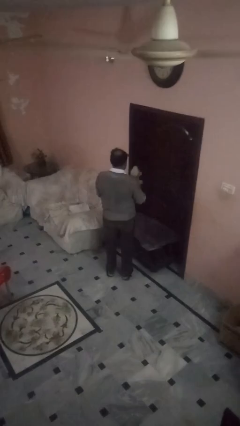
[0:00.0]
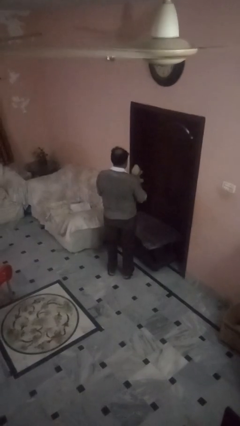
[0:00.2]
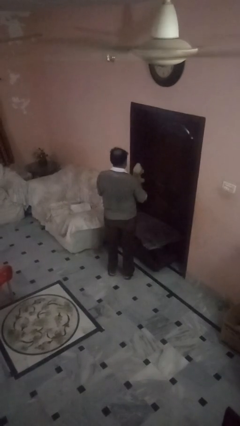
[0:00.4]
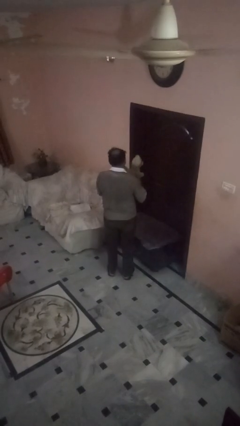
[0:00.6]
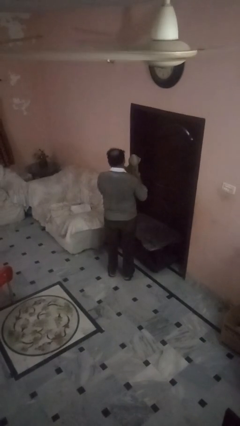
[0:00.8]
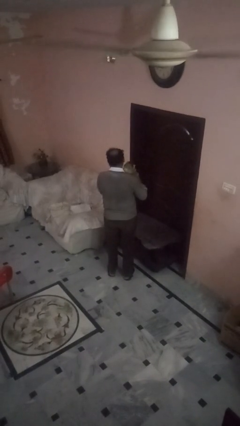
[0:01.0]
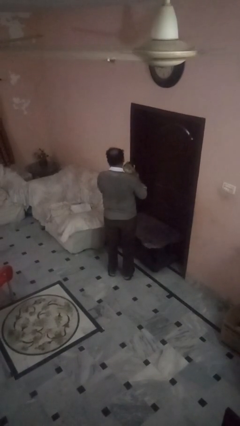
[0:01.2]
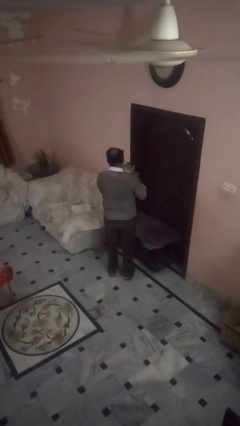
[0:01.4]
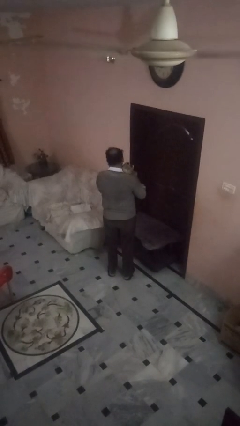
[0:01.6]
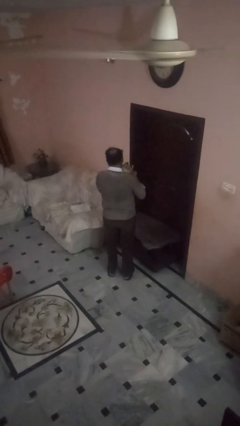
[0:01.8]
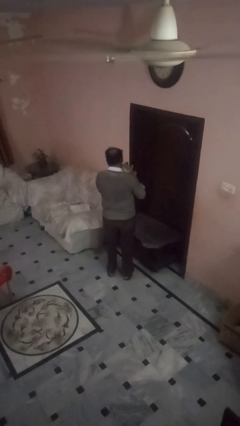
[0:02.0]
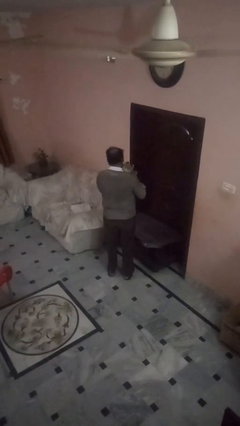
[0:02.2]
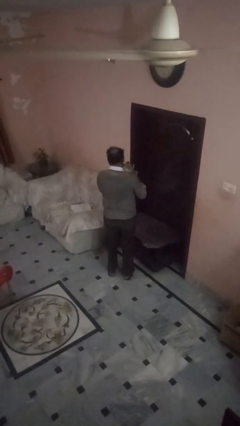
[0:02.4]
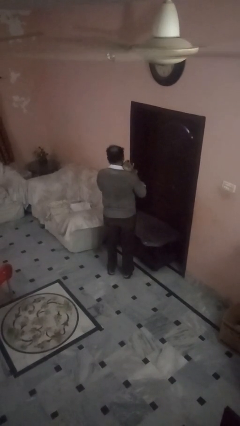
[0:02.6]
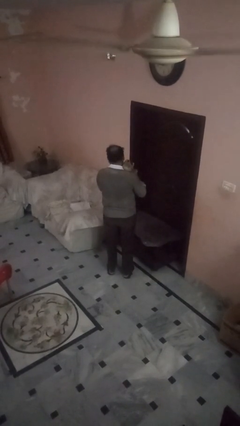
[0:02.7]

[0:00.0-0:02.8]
person hugs stuffed animal

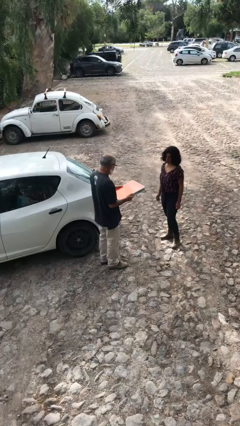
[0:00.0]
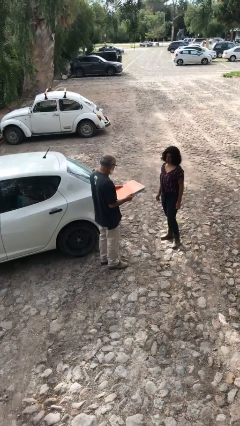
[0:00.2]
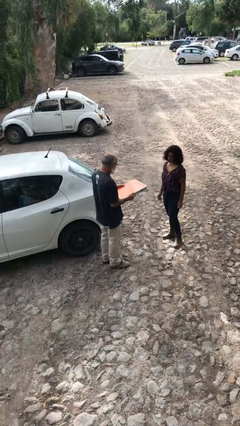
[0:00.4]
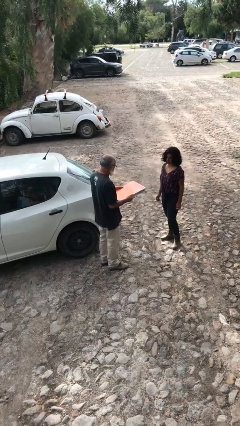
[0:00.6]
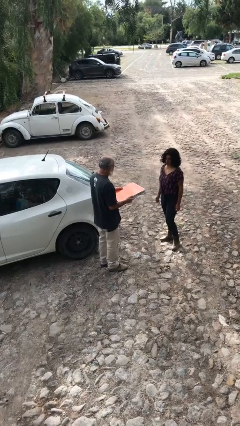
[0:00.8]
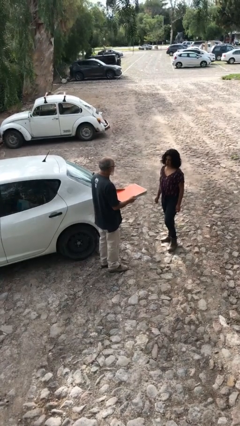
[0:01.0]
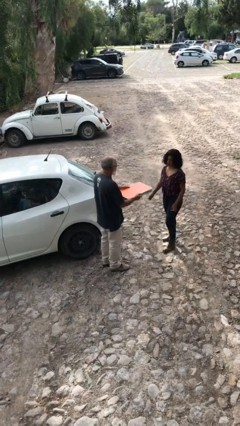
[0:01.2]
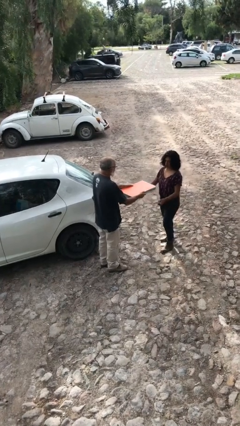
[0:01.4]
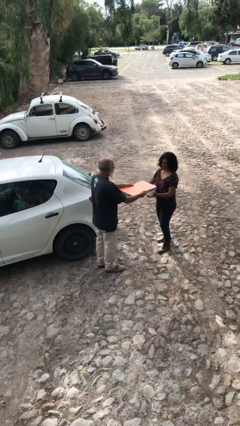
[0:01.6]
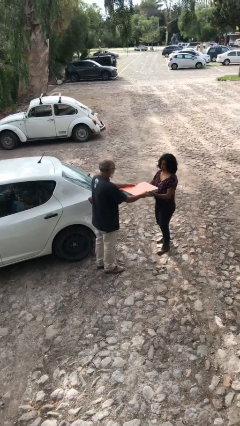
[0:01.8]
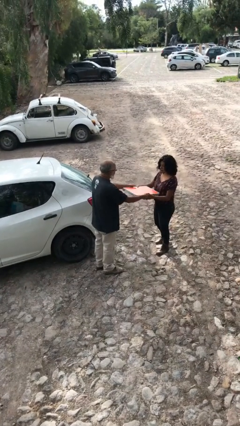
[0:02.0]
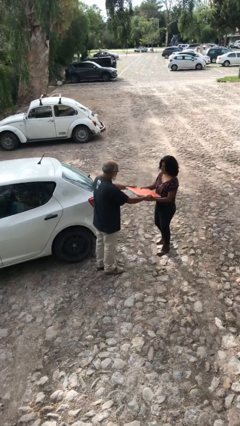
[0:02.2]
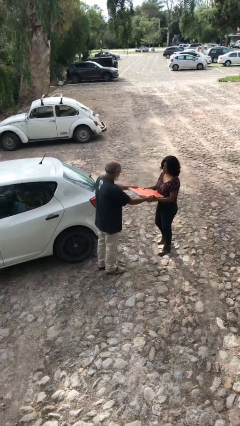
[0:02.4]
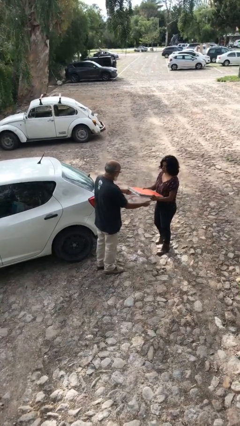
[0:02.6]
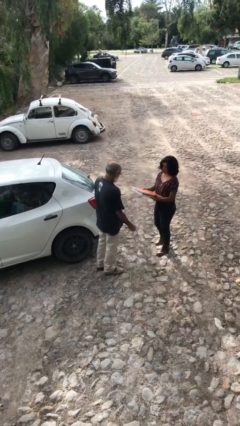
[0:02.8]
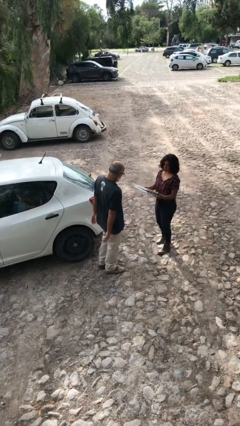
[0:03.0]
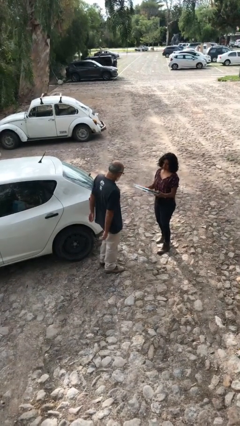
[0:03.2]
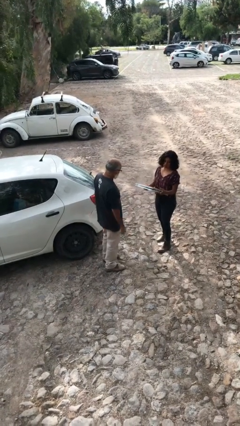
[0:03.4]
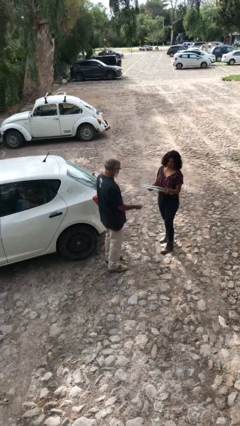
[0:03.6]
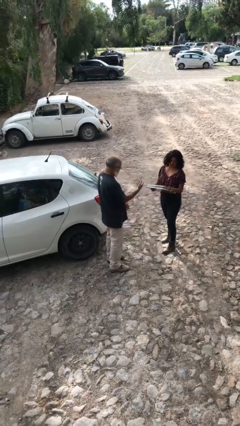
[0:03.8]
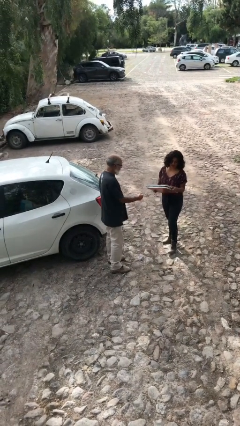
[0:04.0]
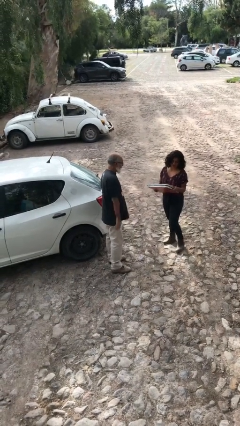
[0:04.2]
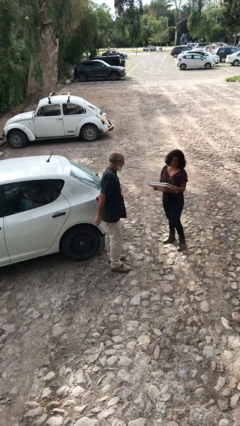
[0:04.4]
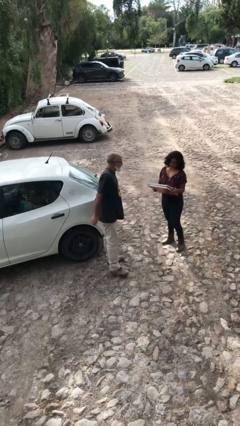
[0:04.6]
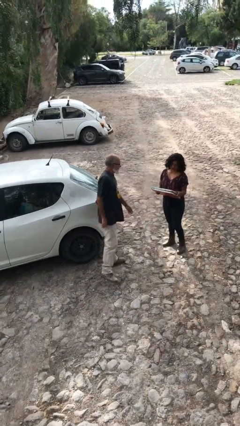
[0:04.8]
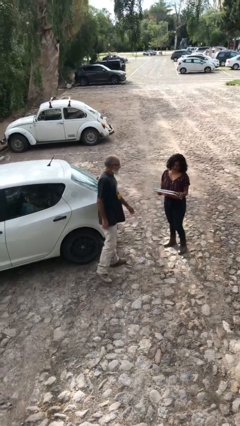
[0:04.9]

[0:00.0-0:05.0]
person transfers object to person

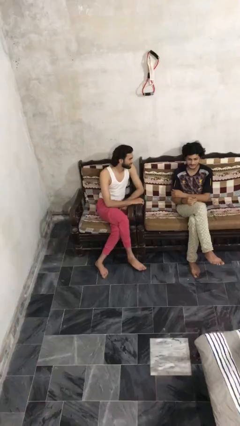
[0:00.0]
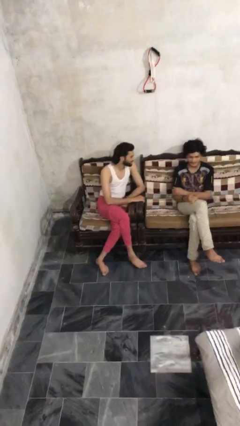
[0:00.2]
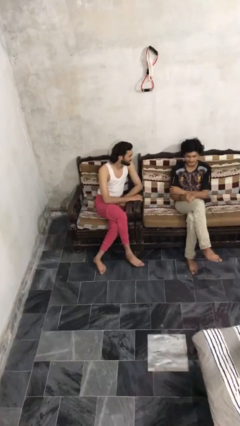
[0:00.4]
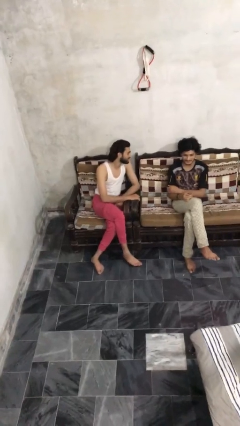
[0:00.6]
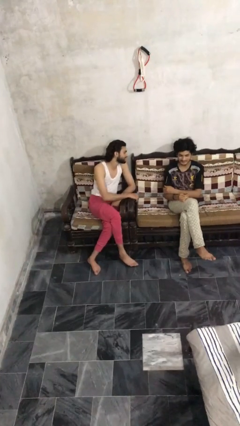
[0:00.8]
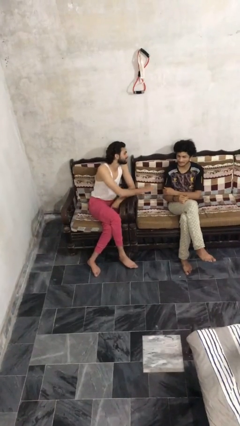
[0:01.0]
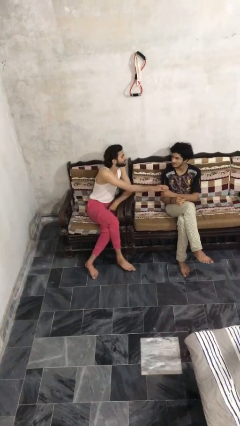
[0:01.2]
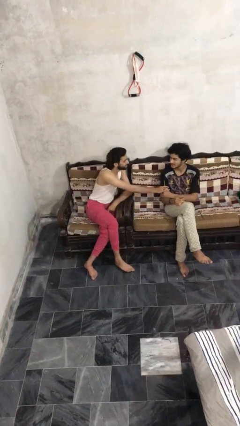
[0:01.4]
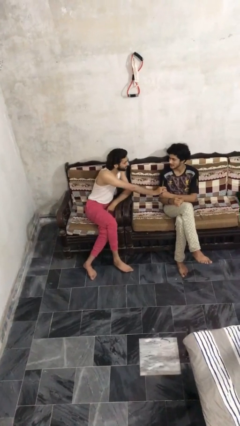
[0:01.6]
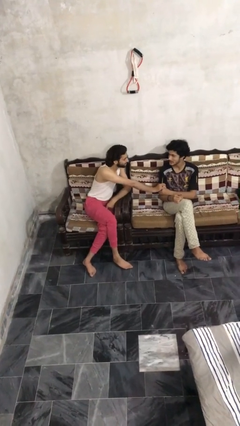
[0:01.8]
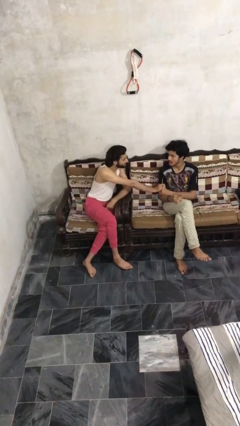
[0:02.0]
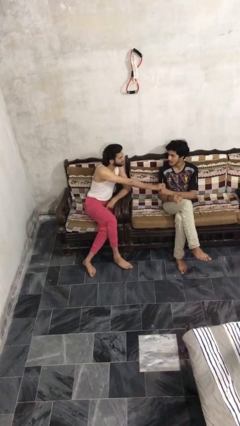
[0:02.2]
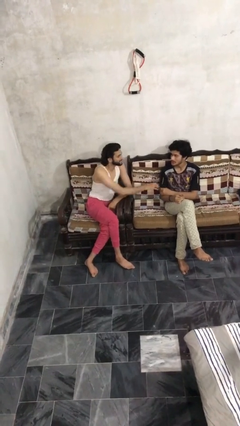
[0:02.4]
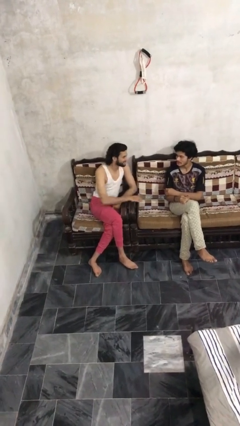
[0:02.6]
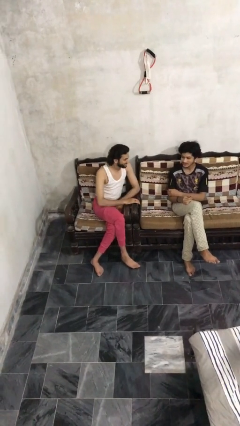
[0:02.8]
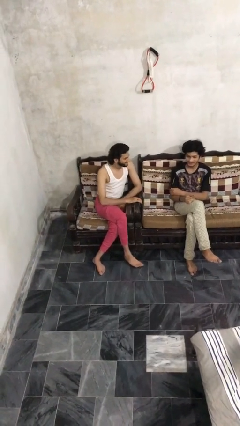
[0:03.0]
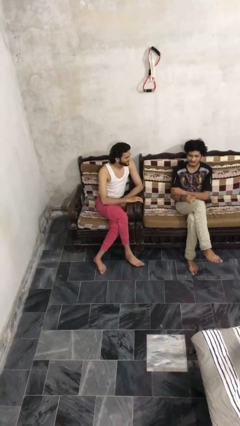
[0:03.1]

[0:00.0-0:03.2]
person grabs person by bicep

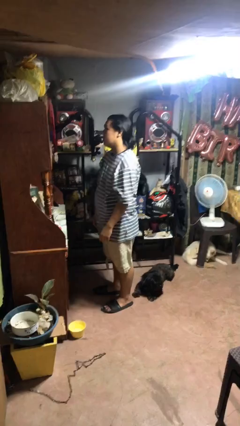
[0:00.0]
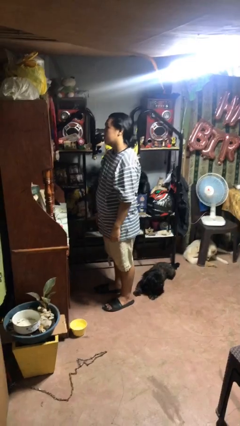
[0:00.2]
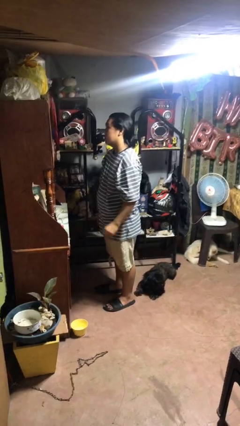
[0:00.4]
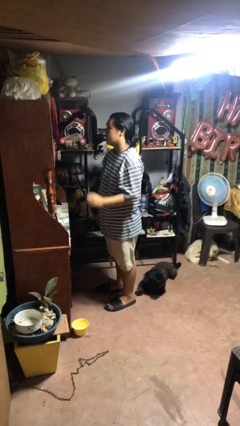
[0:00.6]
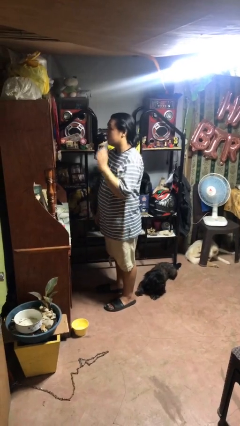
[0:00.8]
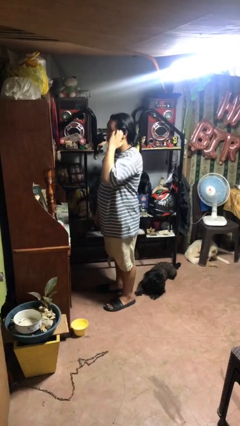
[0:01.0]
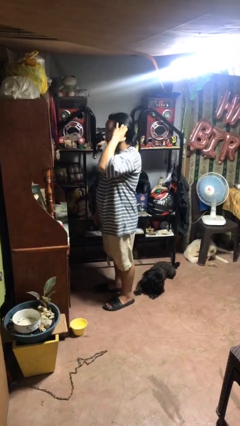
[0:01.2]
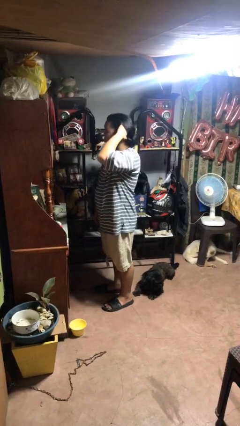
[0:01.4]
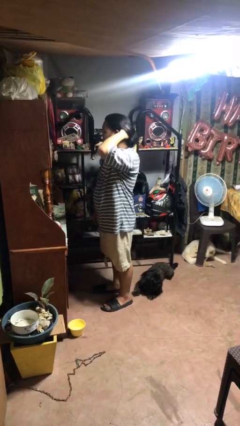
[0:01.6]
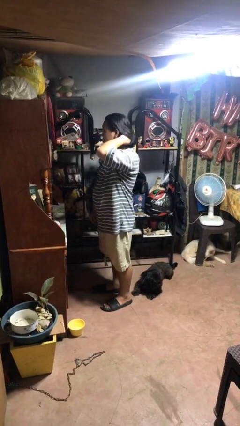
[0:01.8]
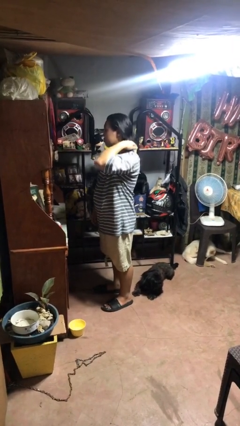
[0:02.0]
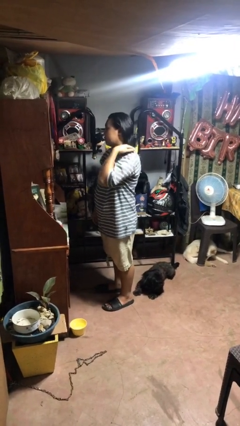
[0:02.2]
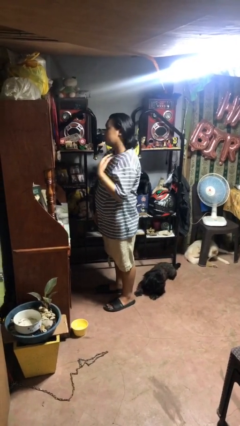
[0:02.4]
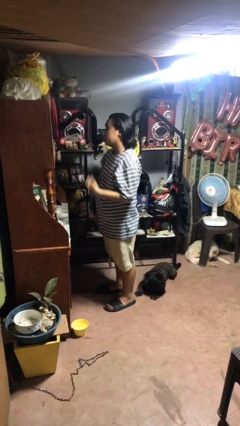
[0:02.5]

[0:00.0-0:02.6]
person strokes hair

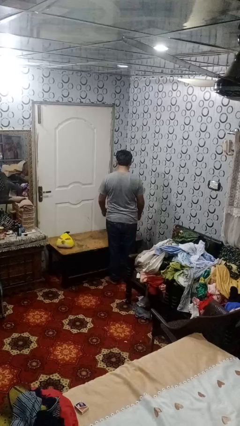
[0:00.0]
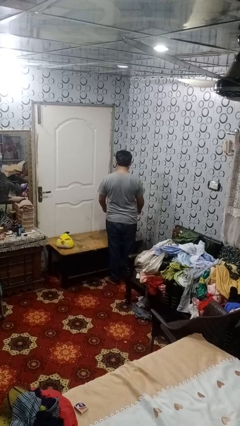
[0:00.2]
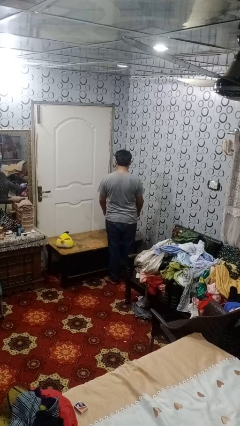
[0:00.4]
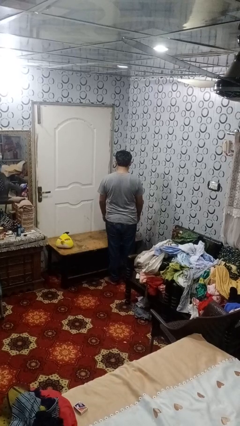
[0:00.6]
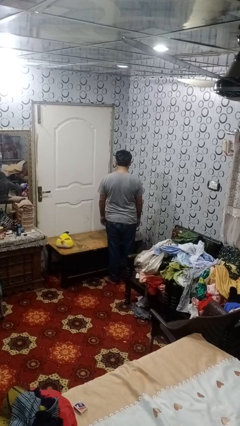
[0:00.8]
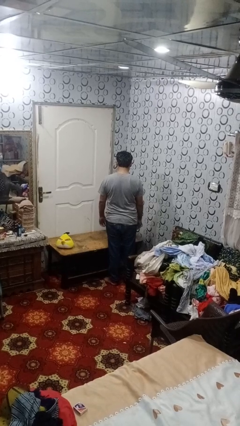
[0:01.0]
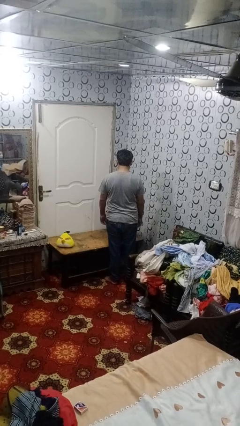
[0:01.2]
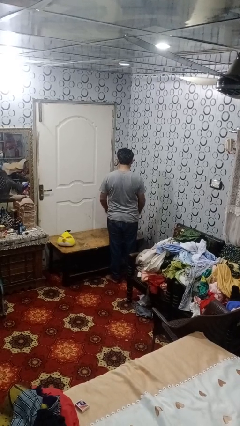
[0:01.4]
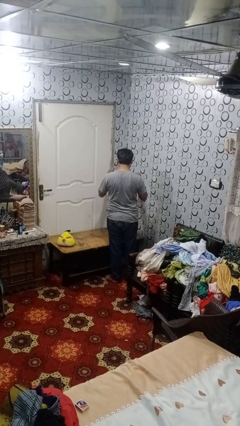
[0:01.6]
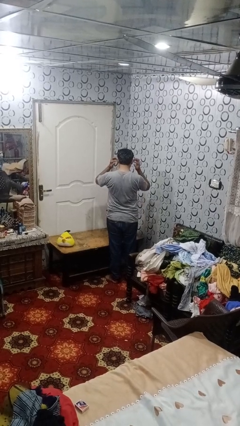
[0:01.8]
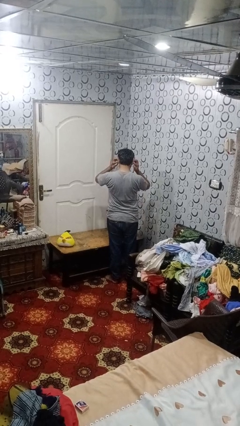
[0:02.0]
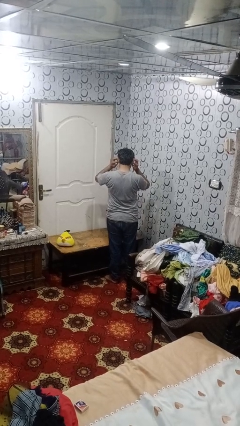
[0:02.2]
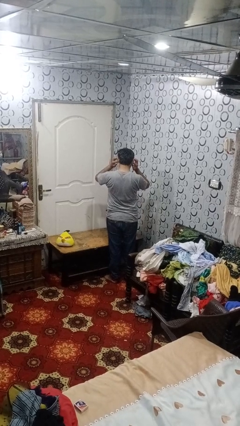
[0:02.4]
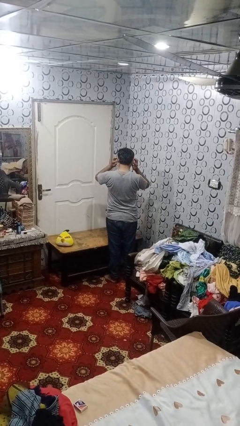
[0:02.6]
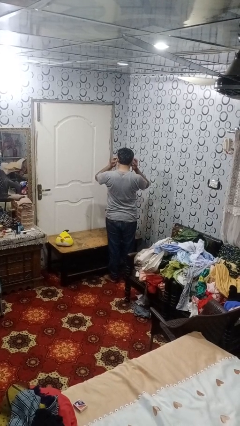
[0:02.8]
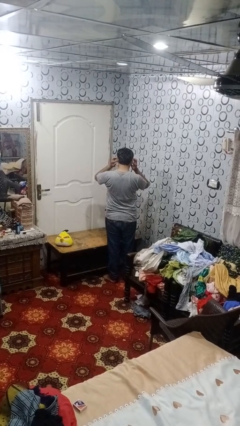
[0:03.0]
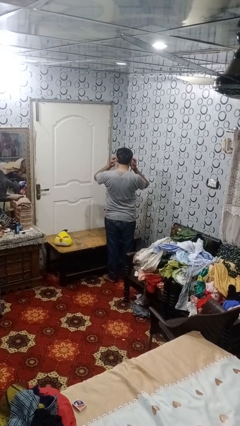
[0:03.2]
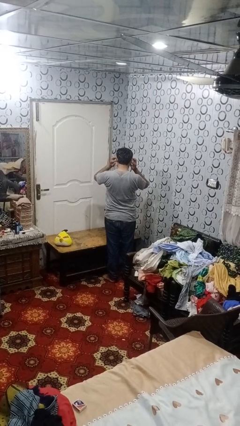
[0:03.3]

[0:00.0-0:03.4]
person puts fingers in ear

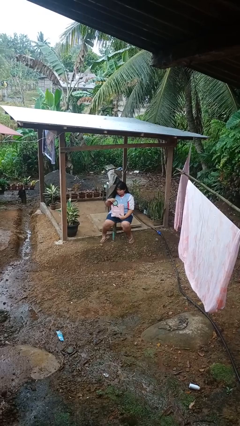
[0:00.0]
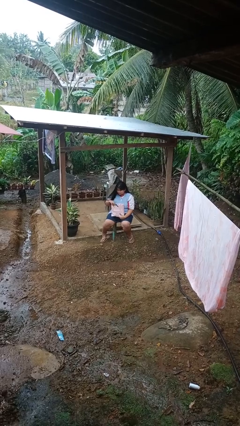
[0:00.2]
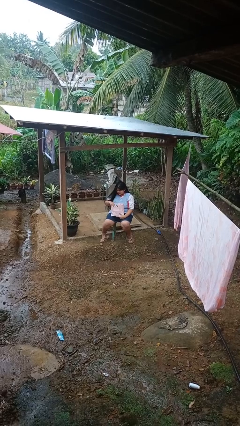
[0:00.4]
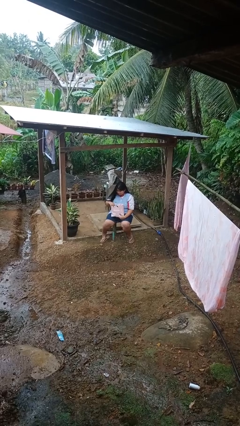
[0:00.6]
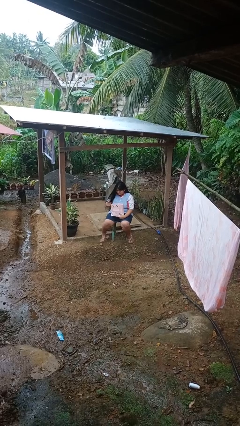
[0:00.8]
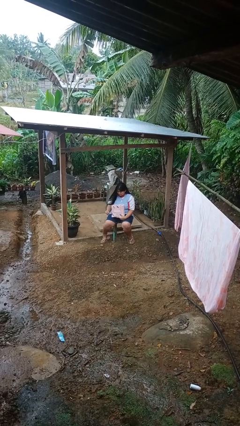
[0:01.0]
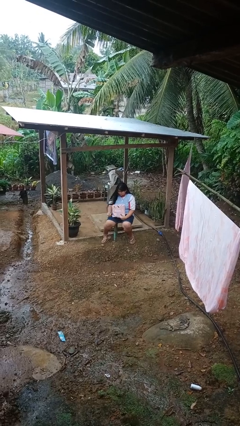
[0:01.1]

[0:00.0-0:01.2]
person puts object into bag
